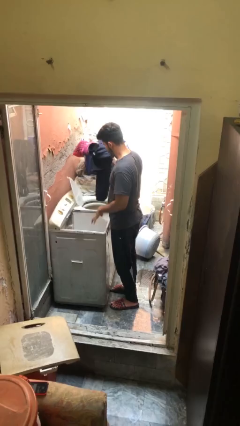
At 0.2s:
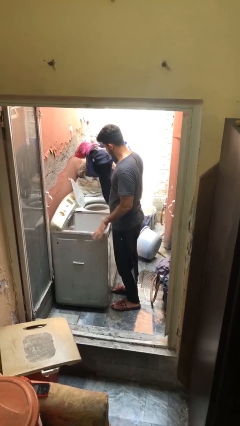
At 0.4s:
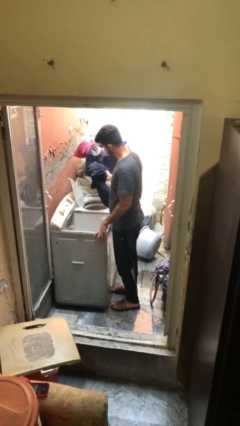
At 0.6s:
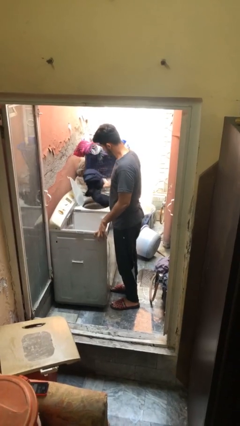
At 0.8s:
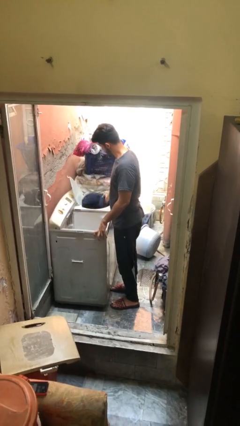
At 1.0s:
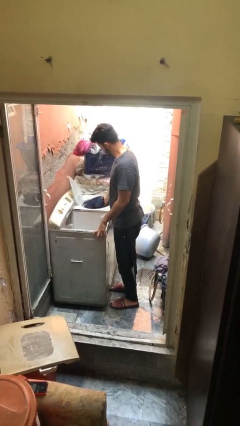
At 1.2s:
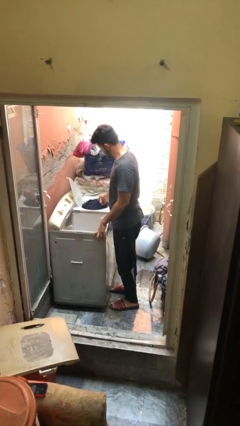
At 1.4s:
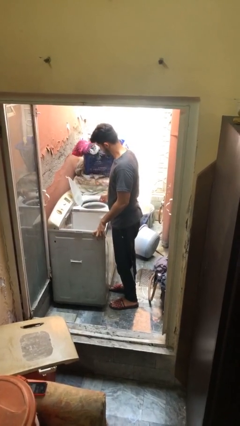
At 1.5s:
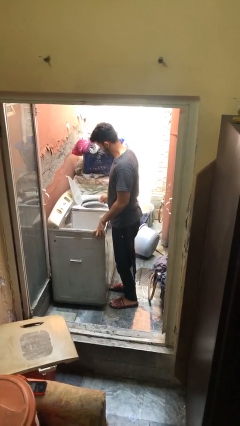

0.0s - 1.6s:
person loads dryer

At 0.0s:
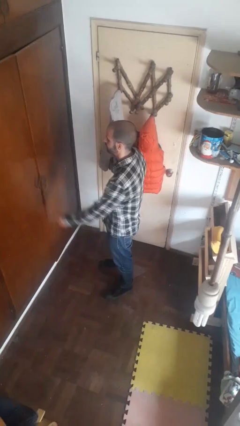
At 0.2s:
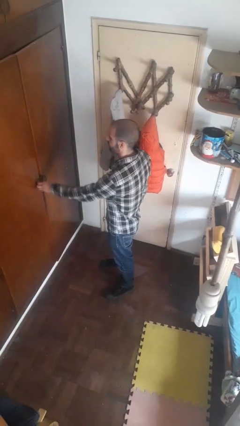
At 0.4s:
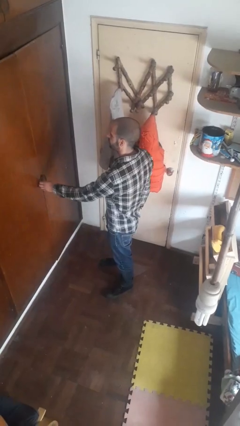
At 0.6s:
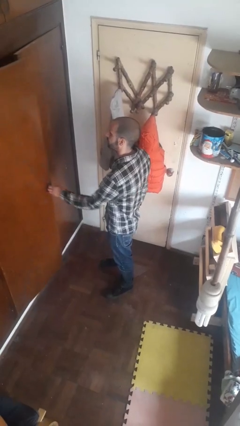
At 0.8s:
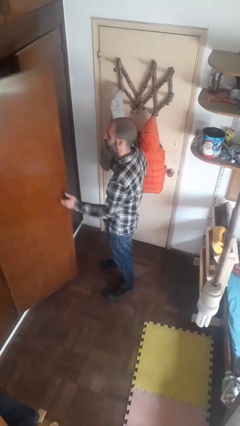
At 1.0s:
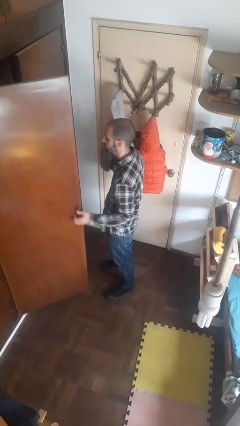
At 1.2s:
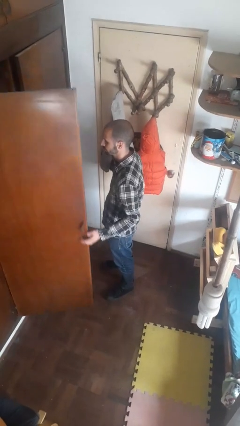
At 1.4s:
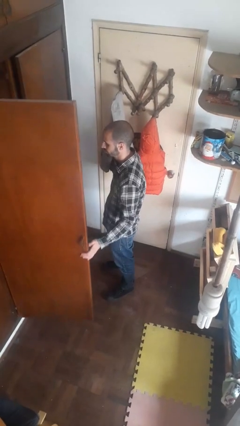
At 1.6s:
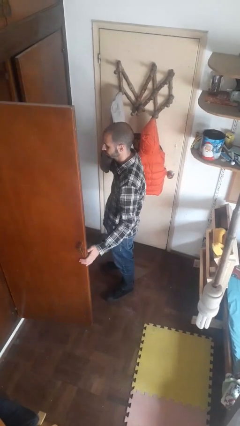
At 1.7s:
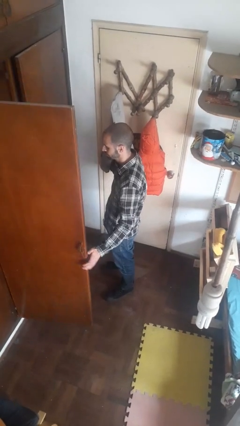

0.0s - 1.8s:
person opens closet door

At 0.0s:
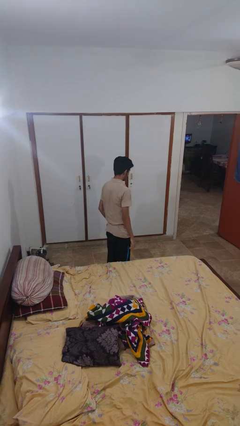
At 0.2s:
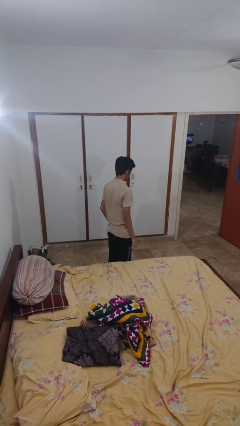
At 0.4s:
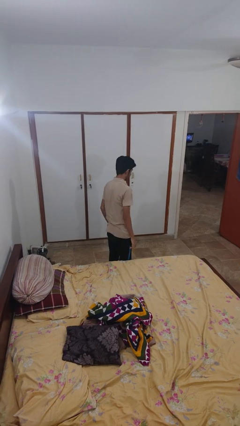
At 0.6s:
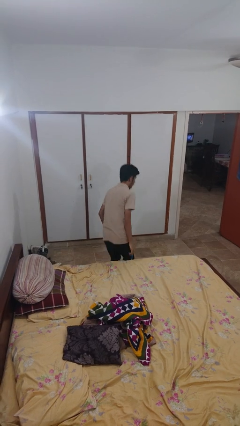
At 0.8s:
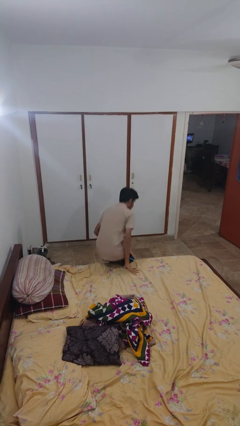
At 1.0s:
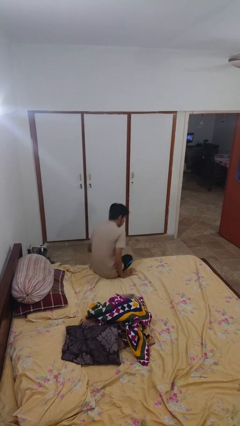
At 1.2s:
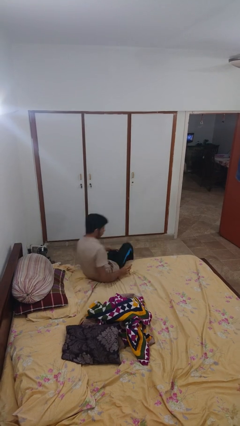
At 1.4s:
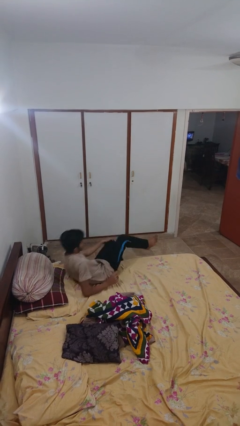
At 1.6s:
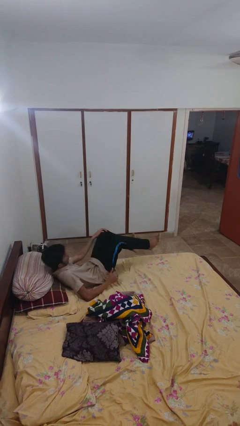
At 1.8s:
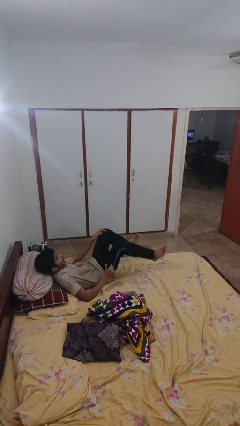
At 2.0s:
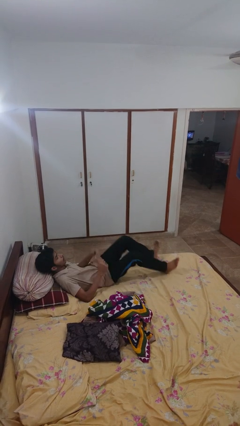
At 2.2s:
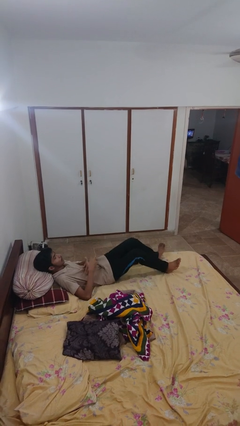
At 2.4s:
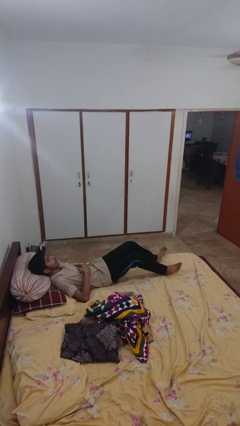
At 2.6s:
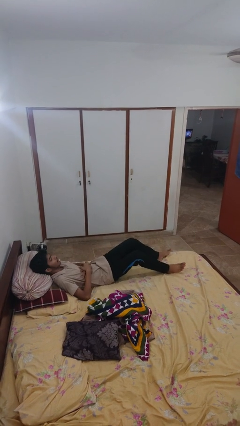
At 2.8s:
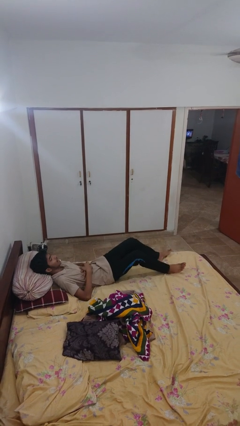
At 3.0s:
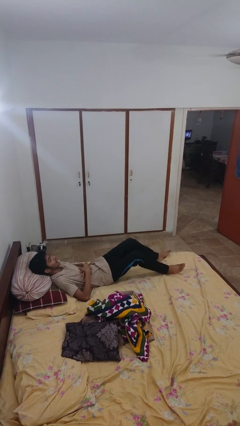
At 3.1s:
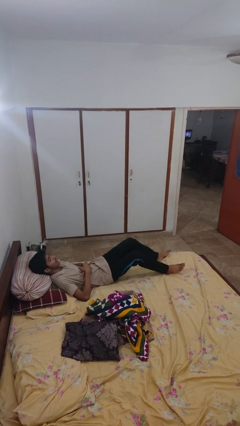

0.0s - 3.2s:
person lies down on bed

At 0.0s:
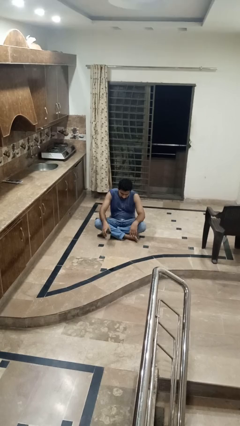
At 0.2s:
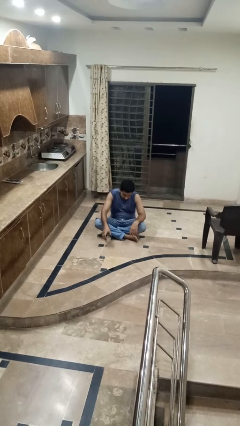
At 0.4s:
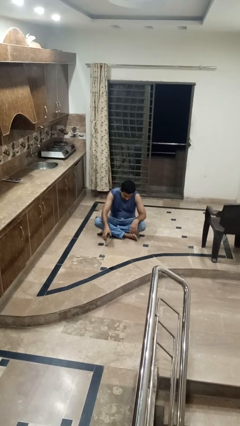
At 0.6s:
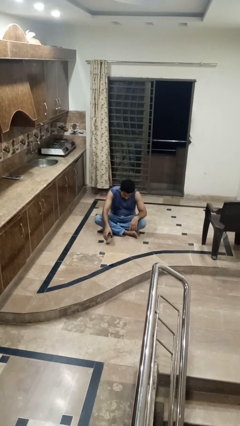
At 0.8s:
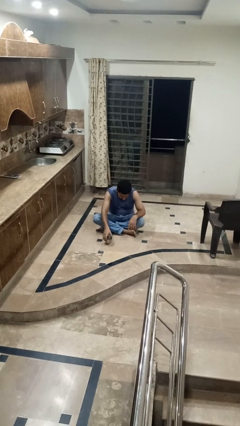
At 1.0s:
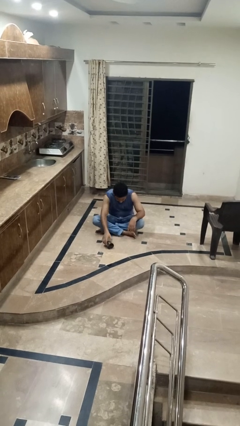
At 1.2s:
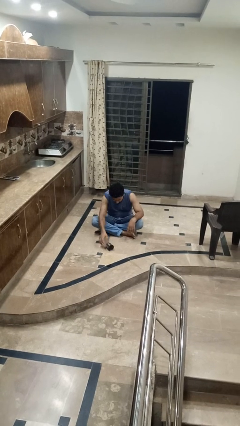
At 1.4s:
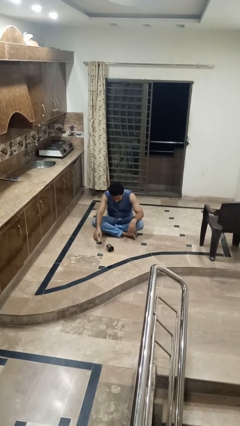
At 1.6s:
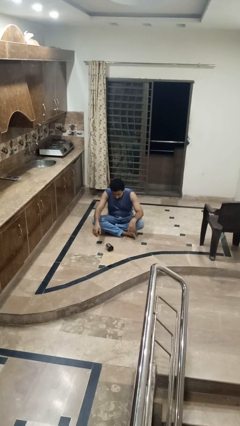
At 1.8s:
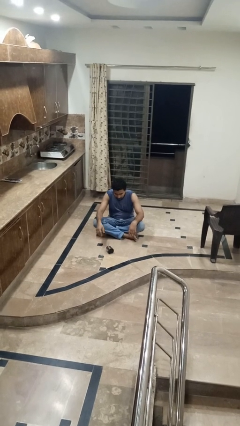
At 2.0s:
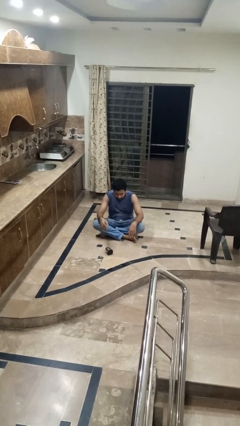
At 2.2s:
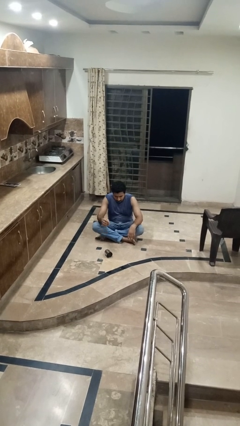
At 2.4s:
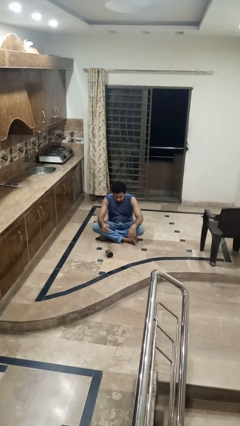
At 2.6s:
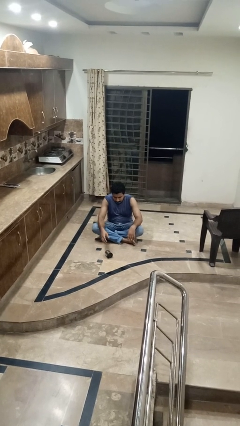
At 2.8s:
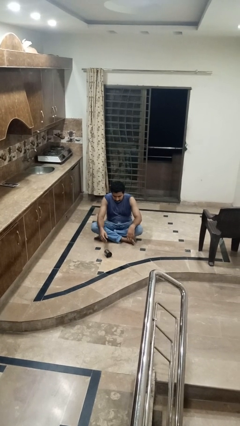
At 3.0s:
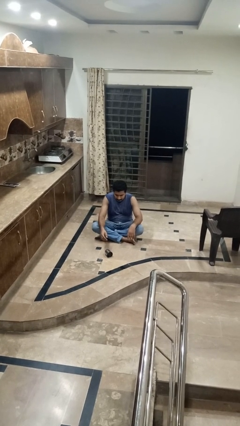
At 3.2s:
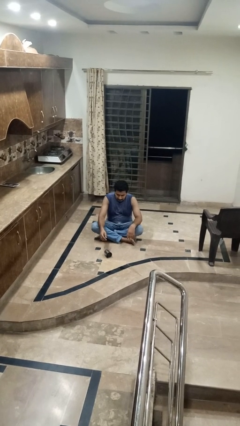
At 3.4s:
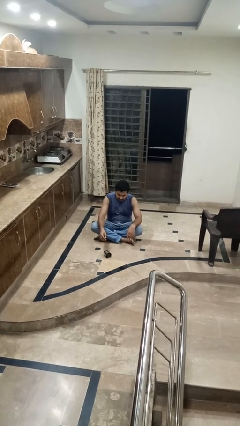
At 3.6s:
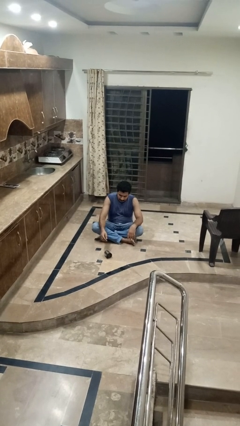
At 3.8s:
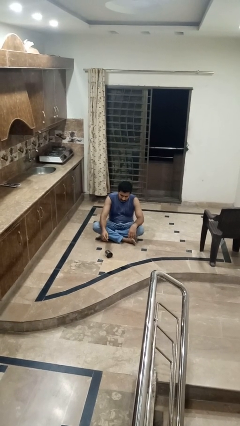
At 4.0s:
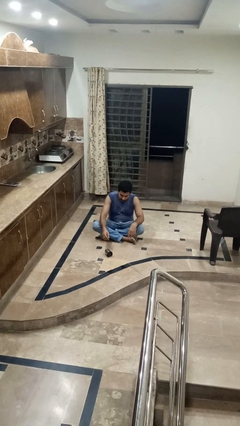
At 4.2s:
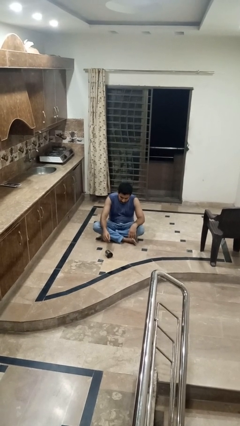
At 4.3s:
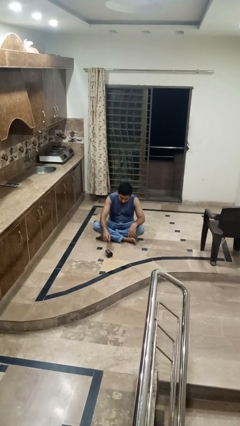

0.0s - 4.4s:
person spills on floor

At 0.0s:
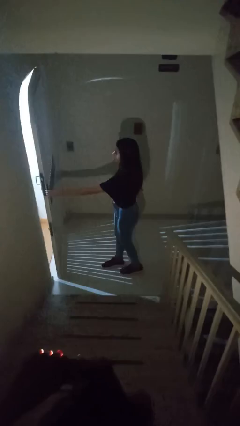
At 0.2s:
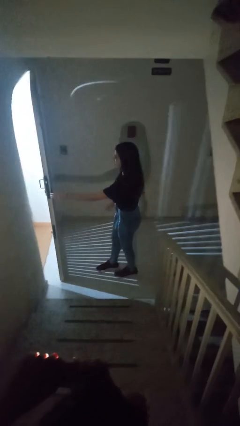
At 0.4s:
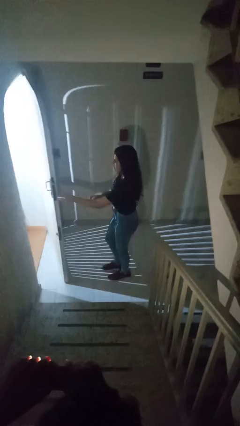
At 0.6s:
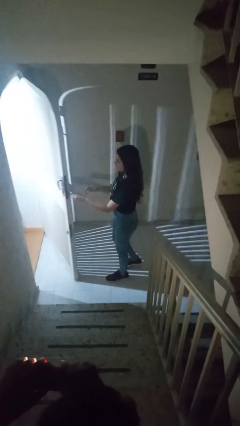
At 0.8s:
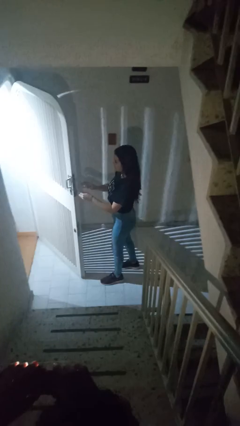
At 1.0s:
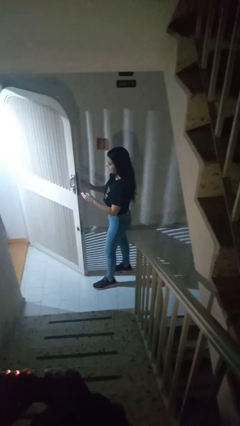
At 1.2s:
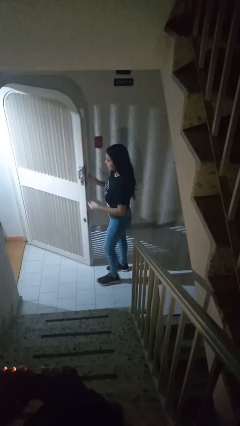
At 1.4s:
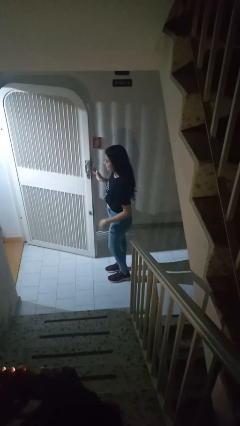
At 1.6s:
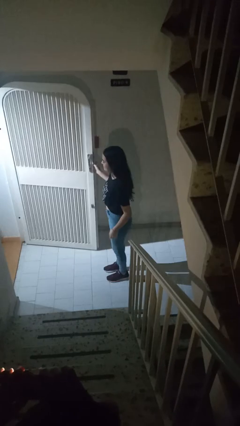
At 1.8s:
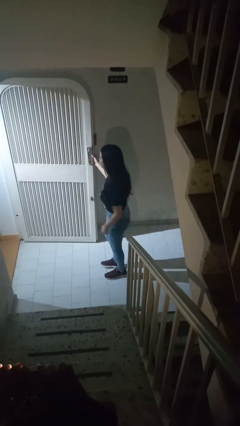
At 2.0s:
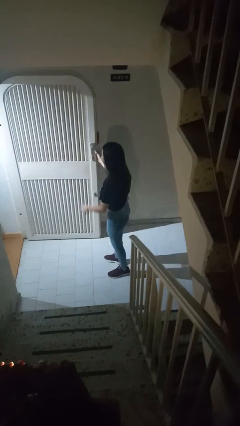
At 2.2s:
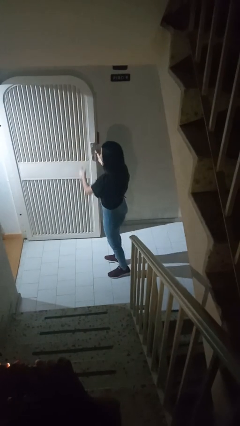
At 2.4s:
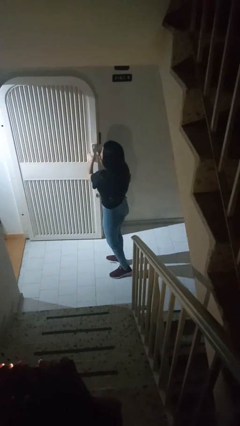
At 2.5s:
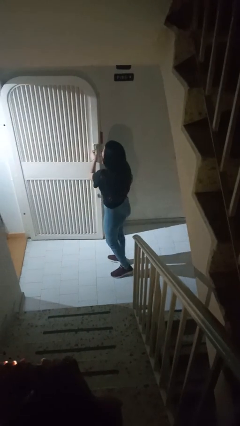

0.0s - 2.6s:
person opens facility door

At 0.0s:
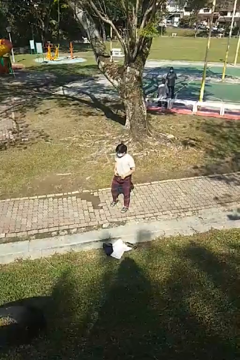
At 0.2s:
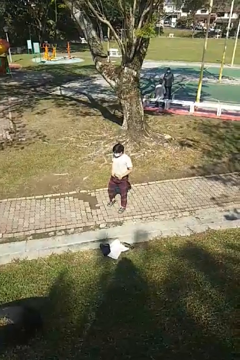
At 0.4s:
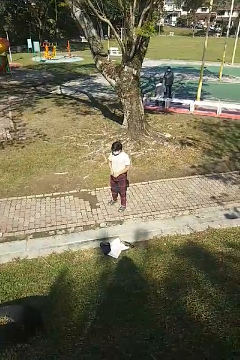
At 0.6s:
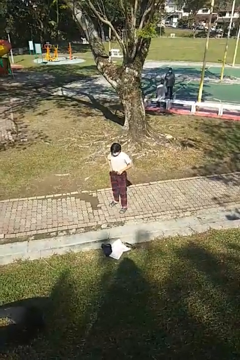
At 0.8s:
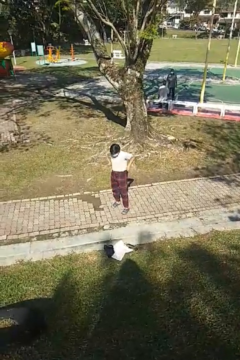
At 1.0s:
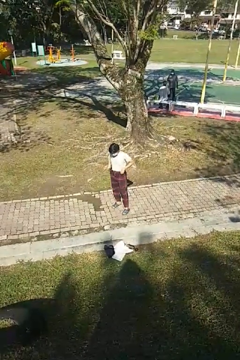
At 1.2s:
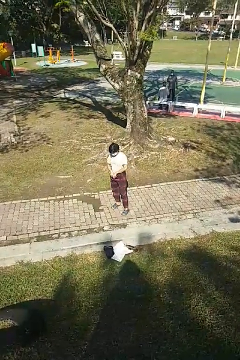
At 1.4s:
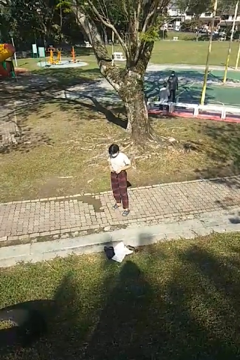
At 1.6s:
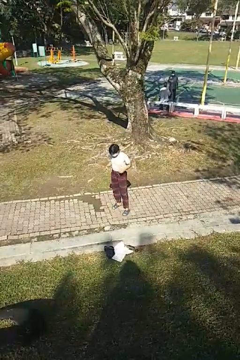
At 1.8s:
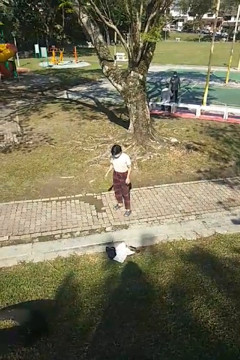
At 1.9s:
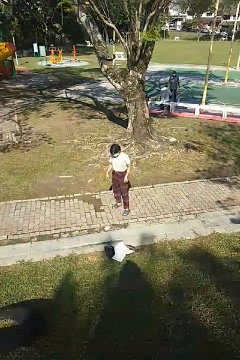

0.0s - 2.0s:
person hikes up pants

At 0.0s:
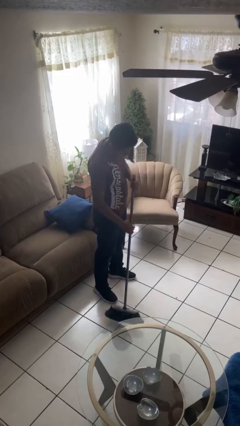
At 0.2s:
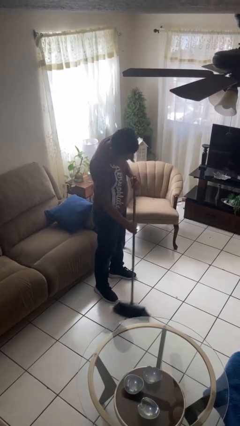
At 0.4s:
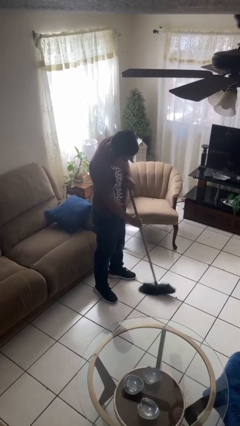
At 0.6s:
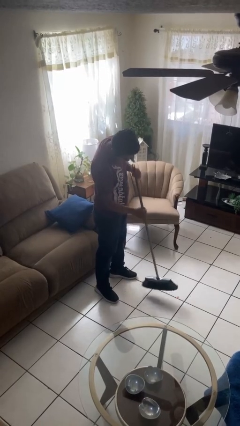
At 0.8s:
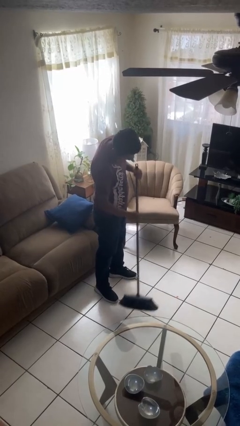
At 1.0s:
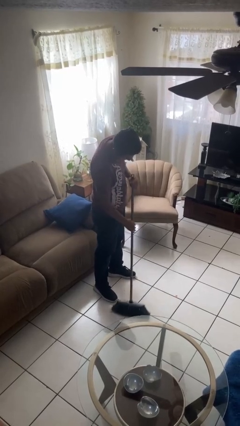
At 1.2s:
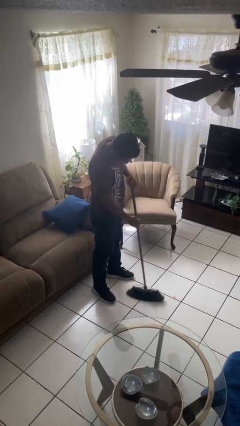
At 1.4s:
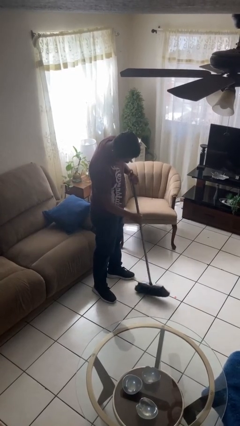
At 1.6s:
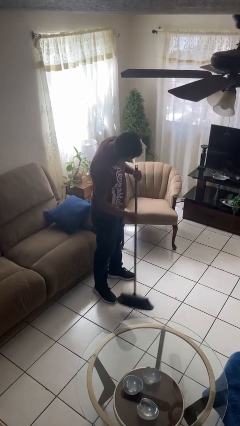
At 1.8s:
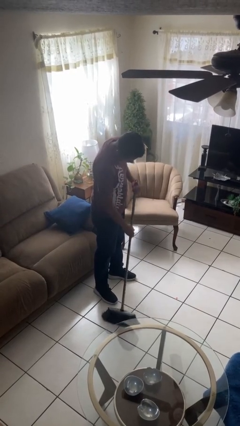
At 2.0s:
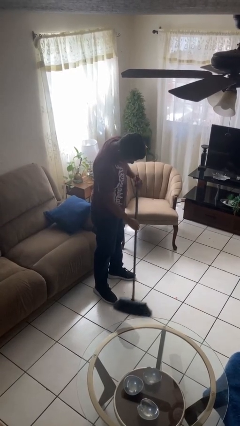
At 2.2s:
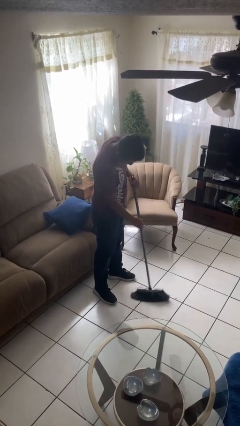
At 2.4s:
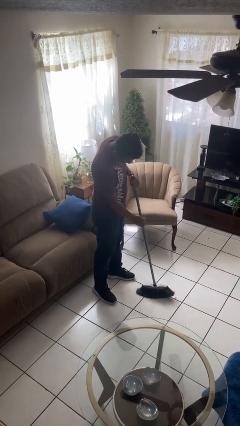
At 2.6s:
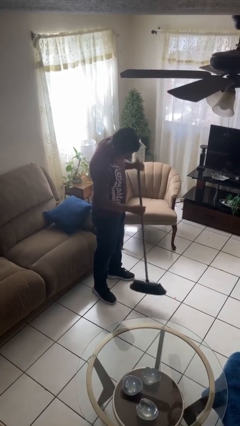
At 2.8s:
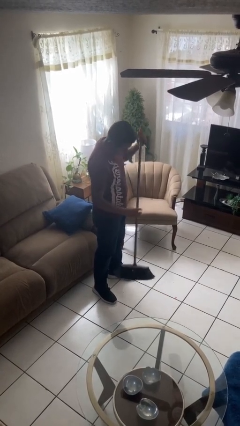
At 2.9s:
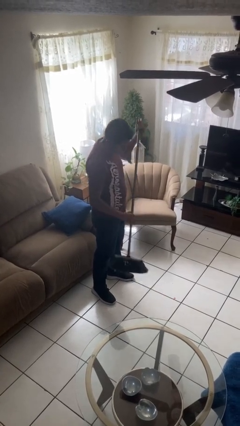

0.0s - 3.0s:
person sweeps floor
